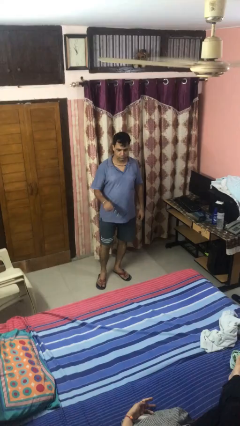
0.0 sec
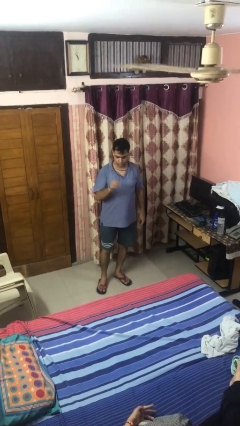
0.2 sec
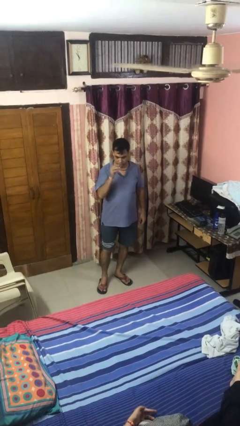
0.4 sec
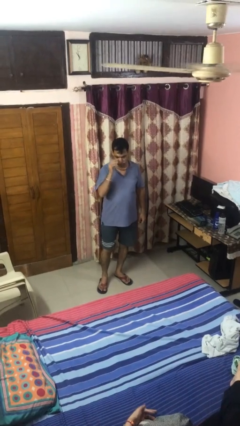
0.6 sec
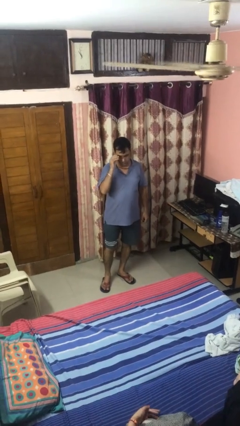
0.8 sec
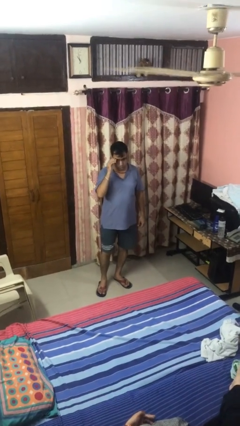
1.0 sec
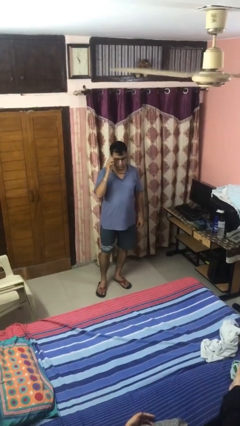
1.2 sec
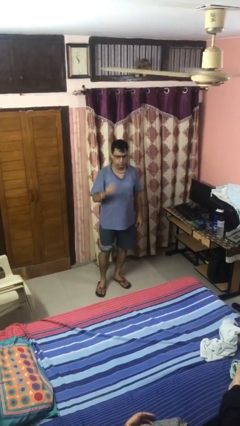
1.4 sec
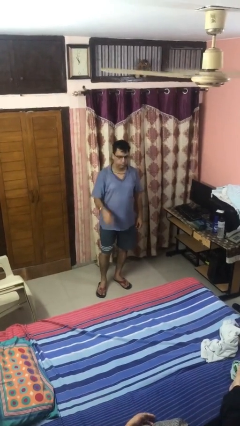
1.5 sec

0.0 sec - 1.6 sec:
person puts on glasses

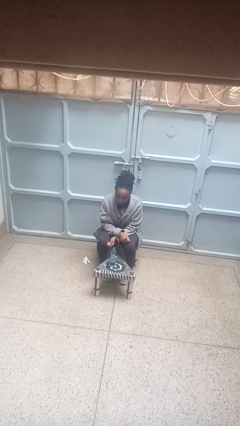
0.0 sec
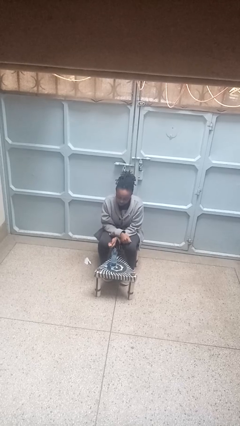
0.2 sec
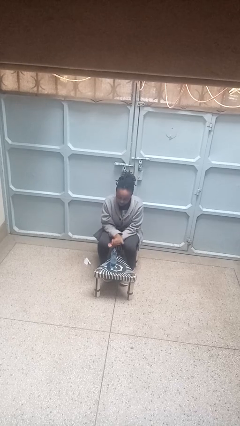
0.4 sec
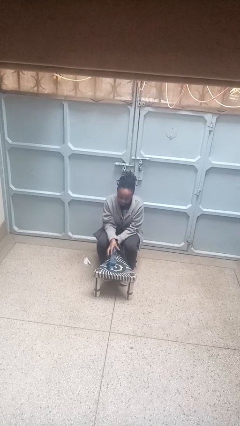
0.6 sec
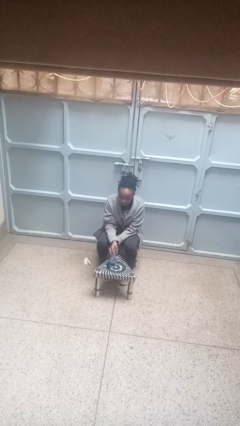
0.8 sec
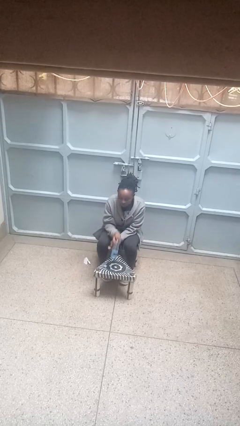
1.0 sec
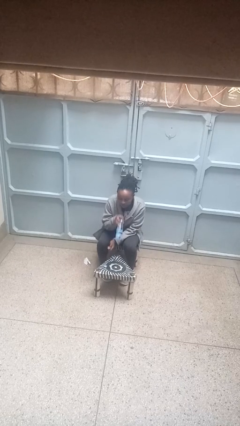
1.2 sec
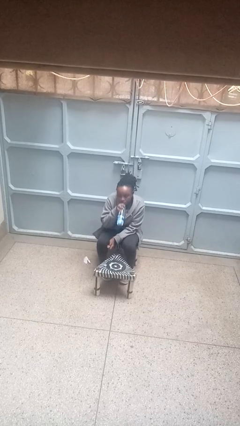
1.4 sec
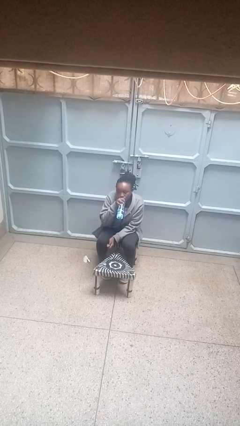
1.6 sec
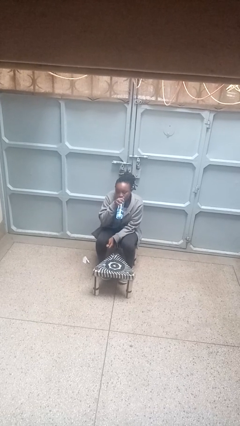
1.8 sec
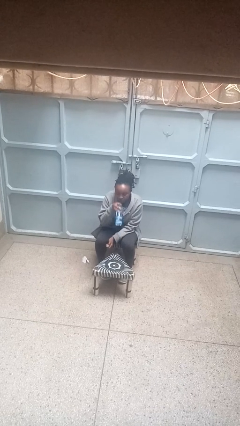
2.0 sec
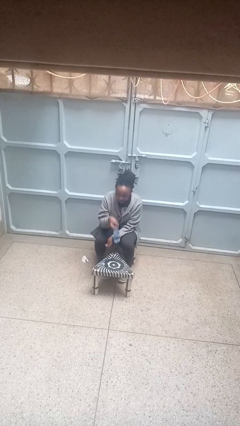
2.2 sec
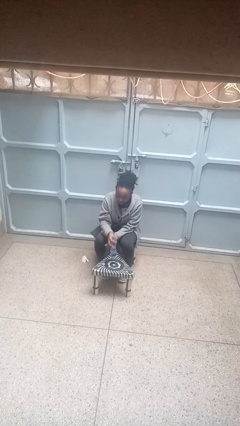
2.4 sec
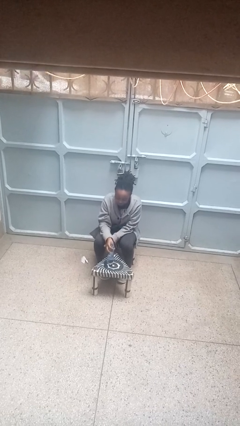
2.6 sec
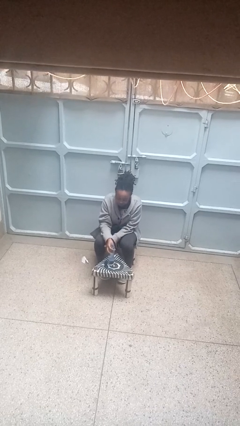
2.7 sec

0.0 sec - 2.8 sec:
person drinks from cup

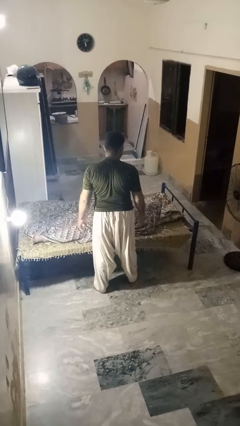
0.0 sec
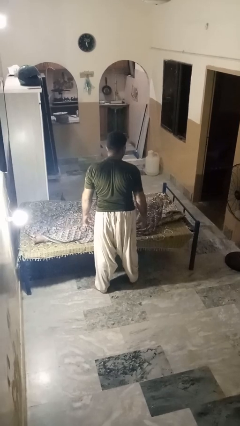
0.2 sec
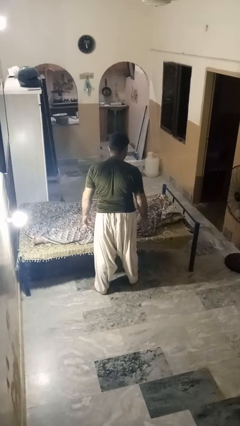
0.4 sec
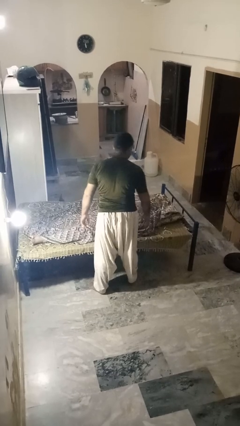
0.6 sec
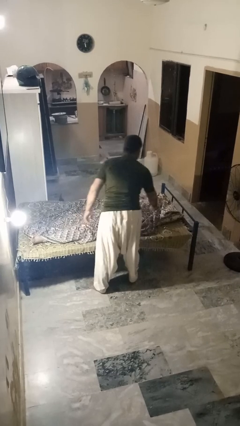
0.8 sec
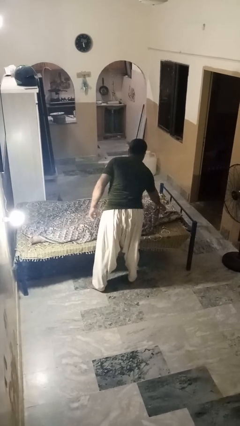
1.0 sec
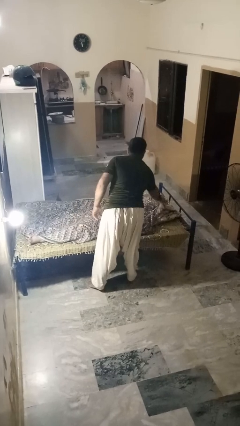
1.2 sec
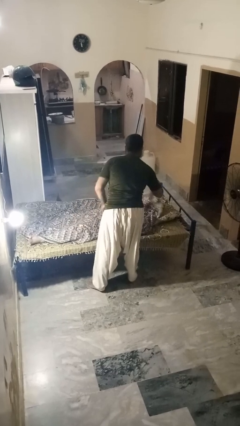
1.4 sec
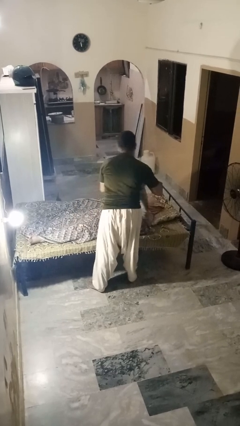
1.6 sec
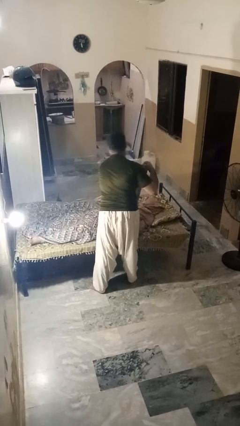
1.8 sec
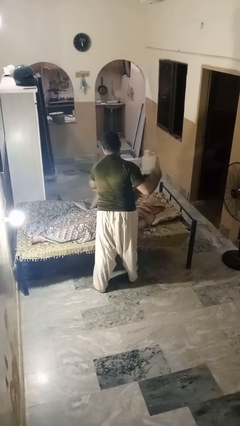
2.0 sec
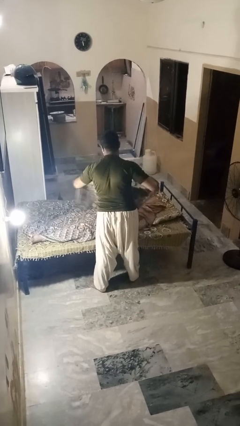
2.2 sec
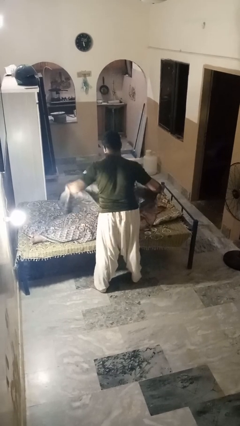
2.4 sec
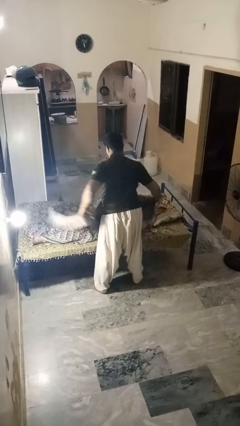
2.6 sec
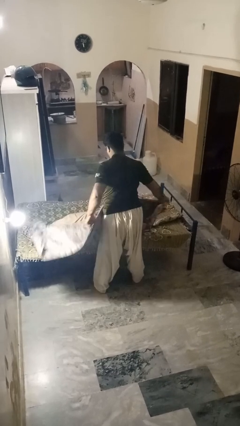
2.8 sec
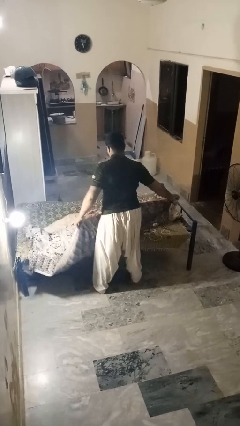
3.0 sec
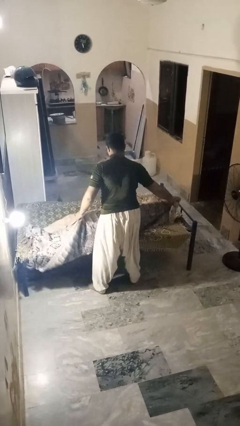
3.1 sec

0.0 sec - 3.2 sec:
person uncovers friend with blanket

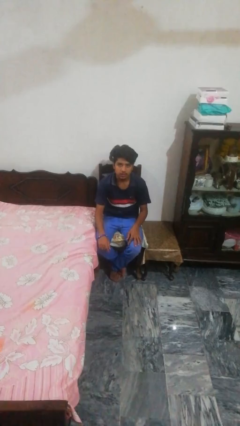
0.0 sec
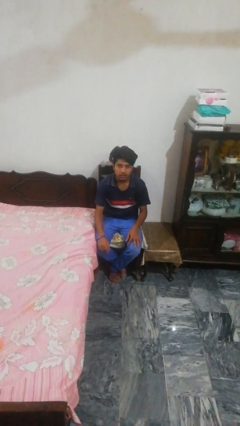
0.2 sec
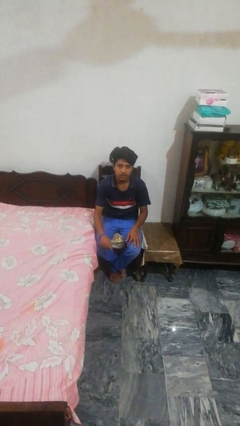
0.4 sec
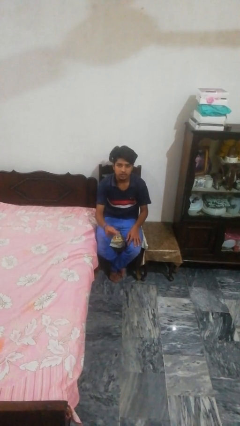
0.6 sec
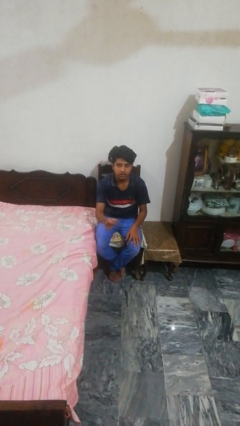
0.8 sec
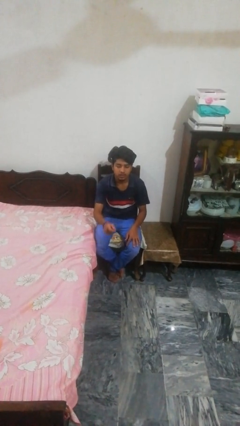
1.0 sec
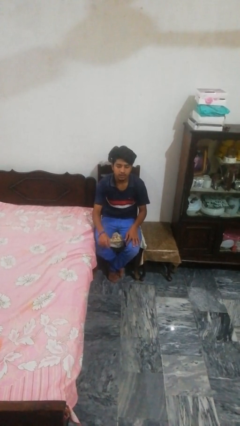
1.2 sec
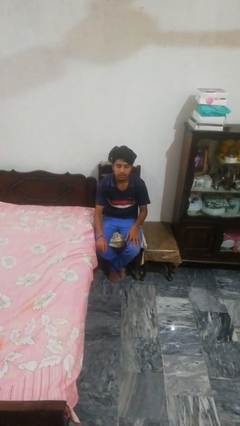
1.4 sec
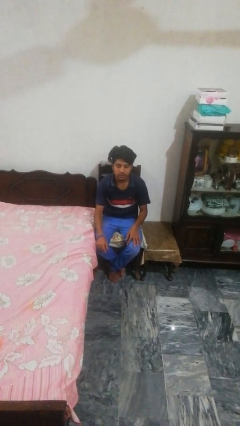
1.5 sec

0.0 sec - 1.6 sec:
person snaps fingers

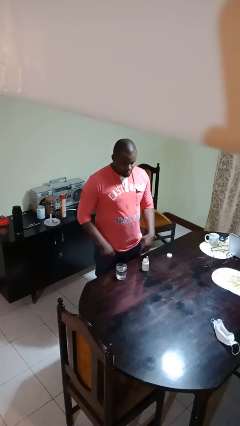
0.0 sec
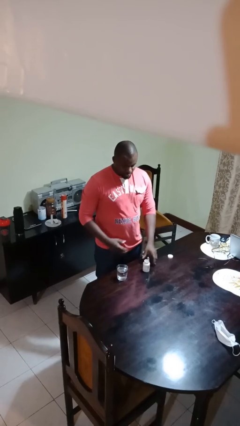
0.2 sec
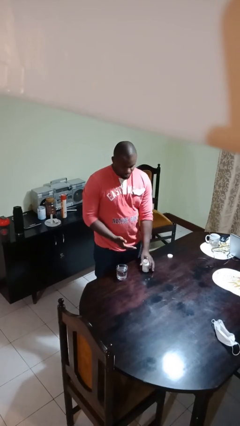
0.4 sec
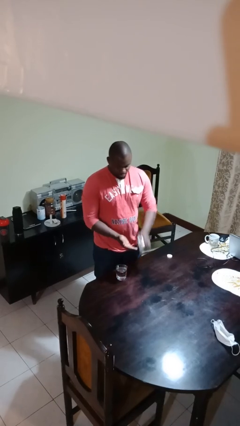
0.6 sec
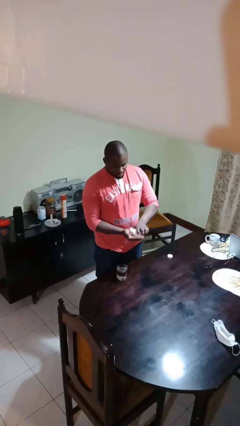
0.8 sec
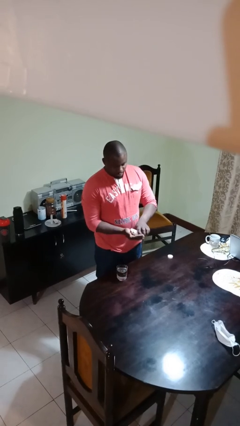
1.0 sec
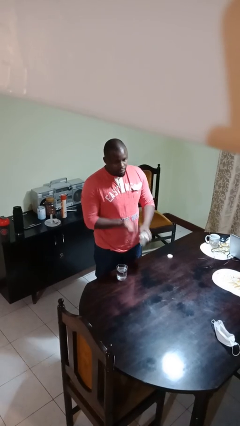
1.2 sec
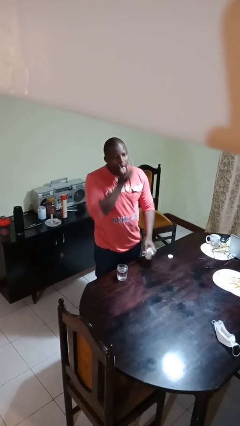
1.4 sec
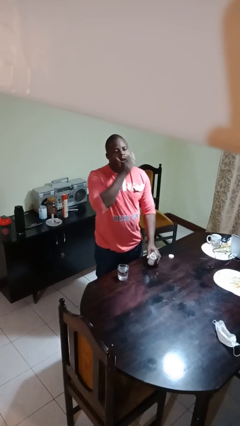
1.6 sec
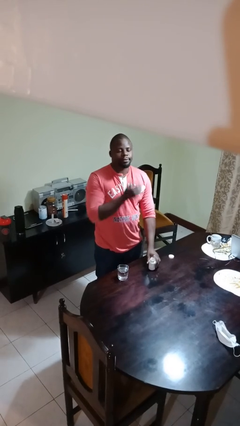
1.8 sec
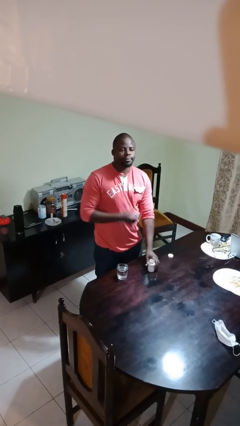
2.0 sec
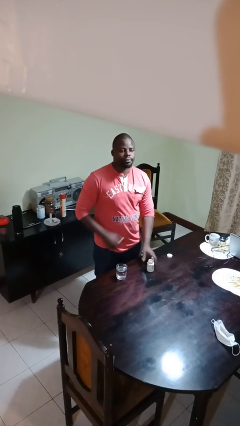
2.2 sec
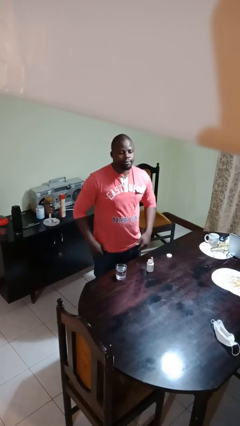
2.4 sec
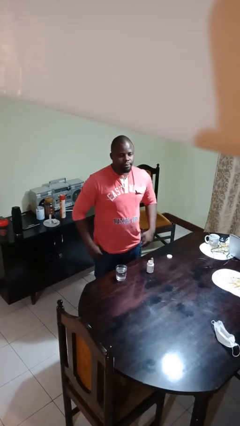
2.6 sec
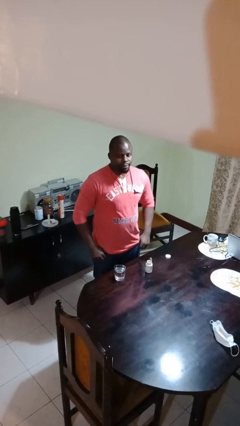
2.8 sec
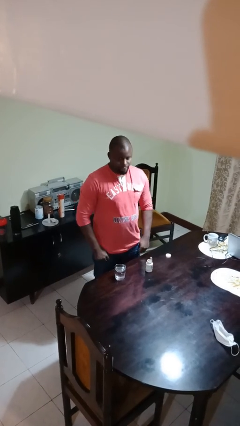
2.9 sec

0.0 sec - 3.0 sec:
person takes medicine pills

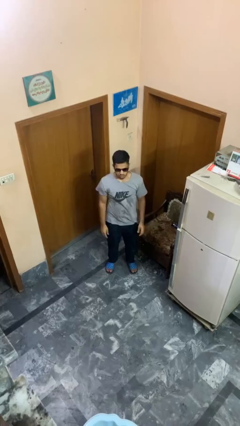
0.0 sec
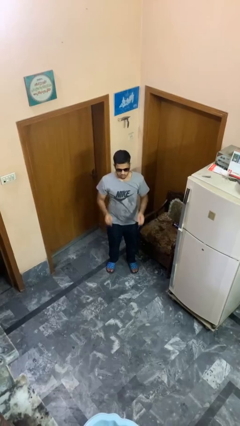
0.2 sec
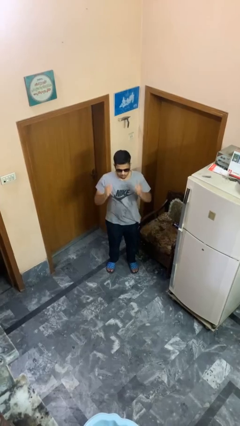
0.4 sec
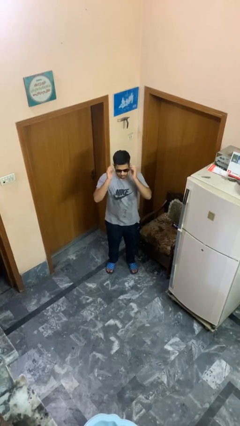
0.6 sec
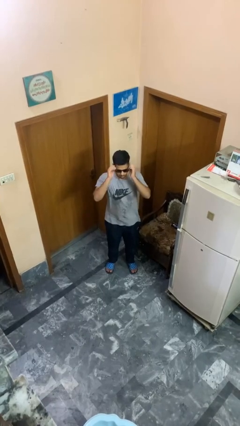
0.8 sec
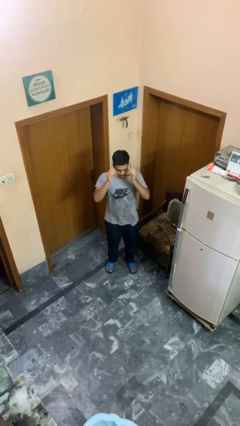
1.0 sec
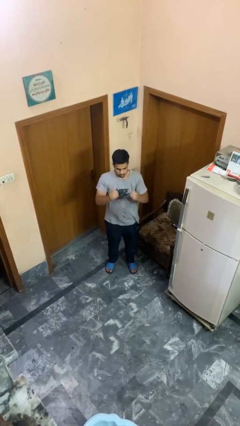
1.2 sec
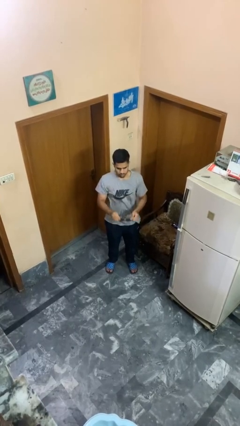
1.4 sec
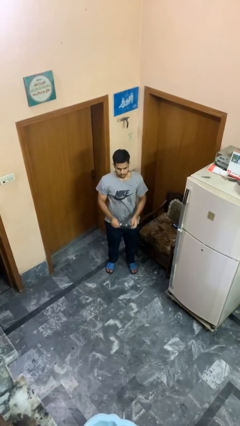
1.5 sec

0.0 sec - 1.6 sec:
person takes off sunglasses

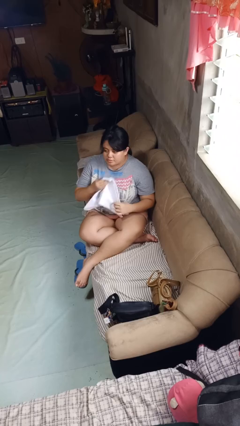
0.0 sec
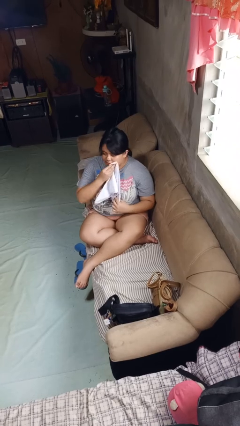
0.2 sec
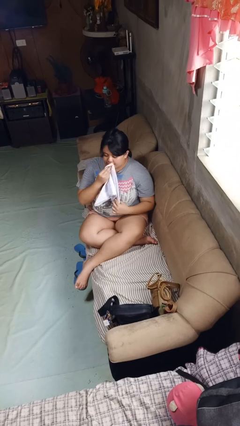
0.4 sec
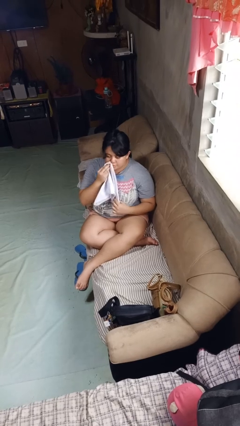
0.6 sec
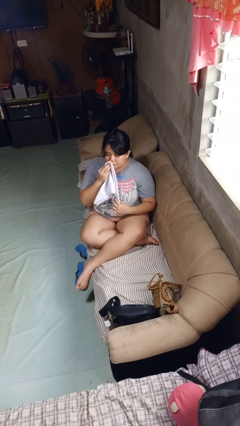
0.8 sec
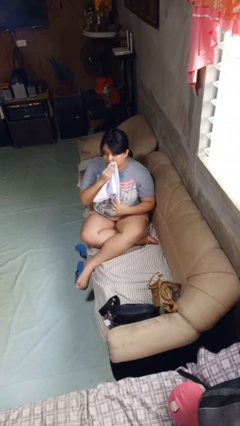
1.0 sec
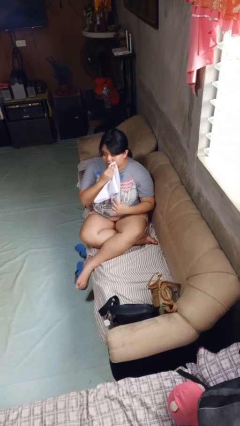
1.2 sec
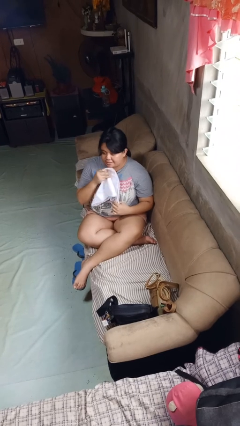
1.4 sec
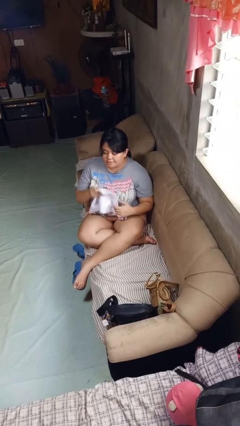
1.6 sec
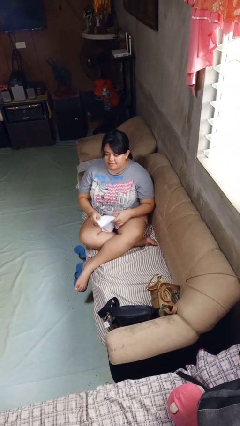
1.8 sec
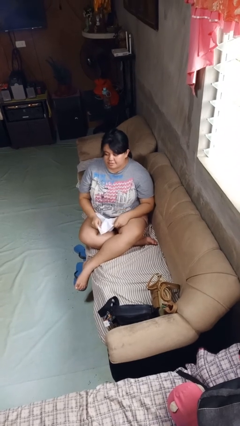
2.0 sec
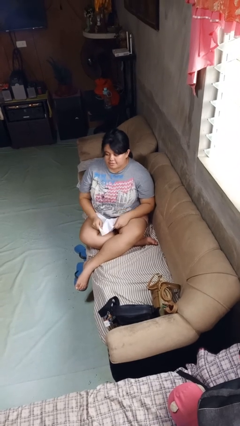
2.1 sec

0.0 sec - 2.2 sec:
person wipes mouth with napkin

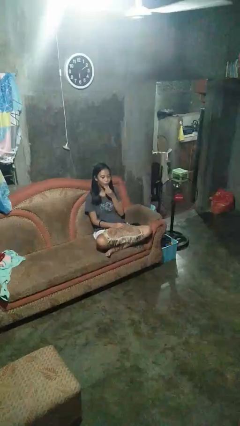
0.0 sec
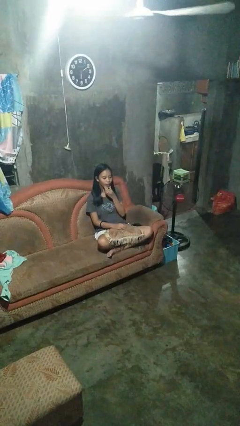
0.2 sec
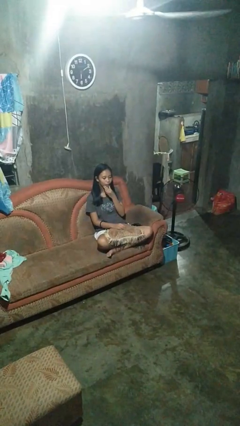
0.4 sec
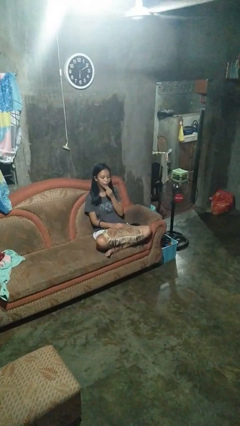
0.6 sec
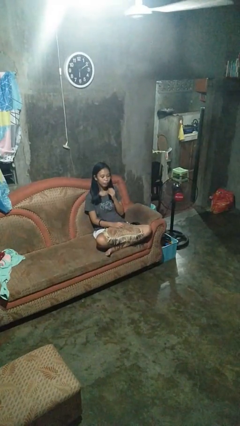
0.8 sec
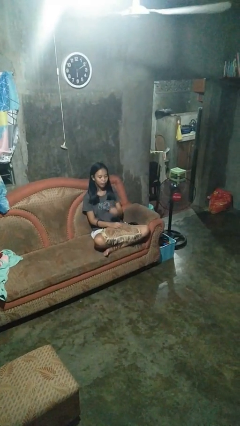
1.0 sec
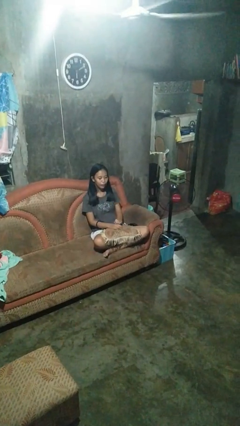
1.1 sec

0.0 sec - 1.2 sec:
person strokes chin
